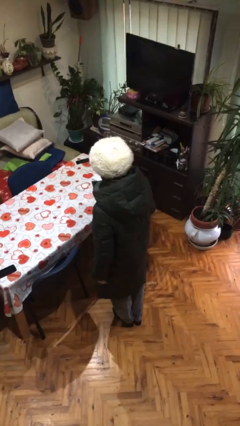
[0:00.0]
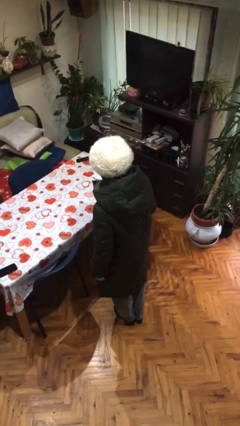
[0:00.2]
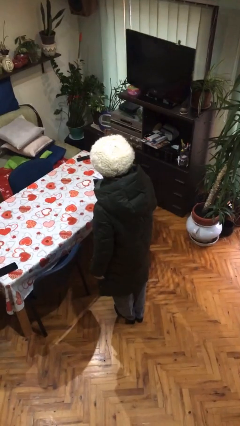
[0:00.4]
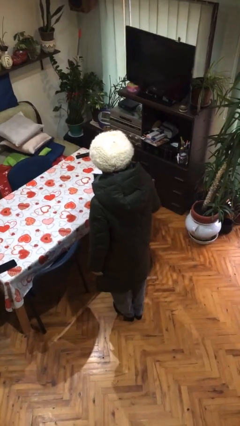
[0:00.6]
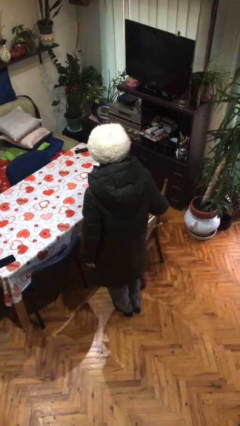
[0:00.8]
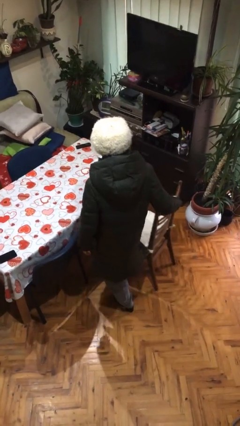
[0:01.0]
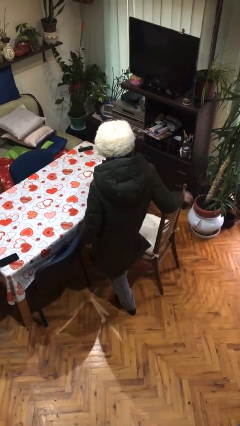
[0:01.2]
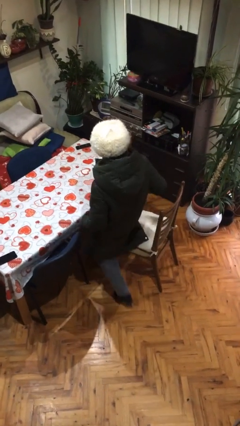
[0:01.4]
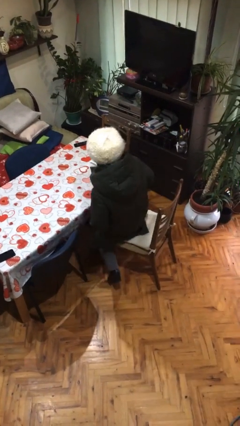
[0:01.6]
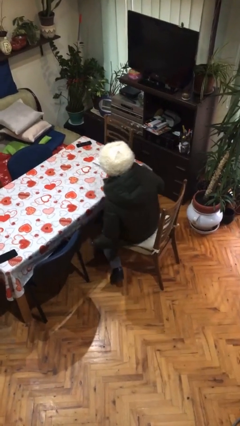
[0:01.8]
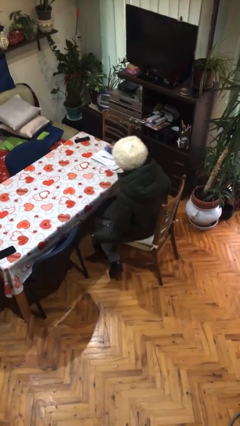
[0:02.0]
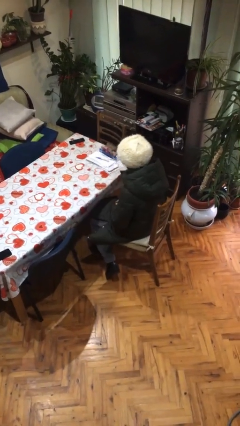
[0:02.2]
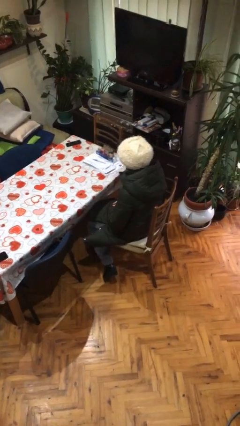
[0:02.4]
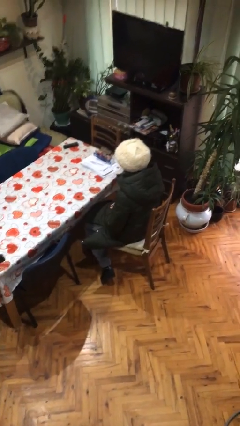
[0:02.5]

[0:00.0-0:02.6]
person sits down

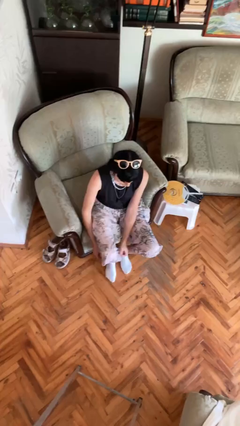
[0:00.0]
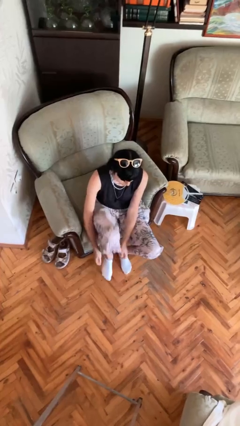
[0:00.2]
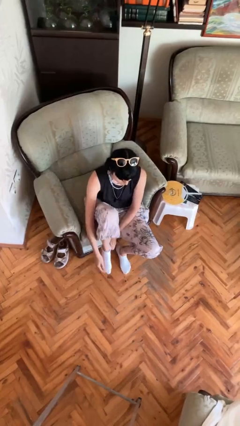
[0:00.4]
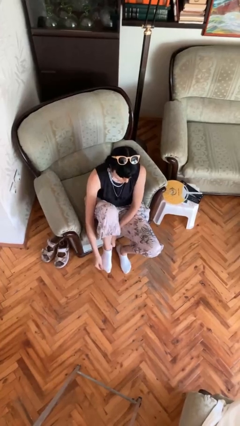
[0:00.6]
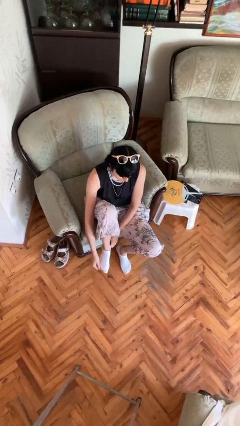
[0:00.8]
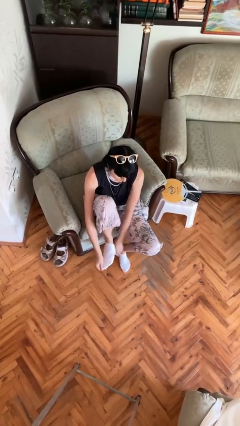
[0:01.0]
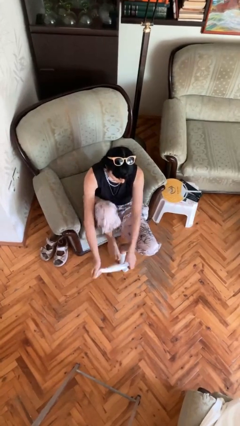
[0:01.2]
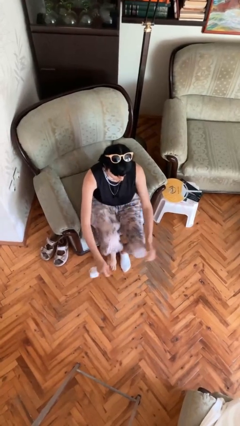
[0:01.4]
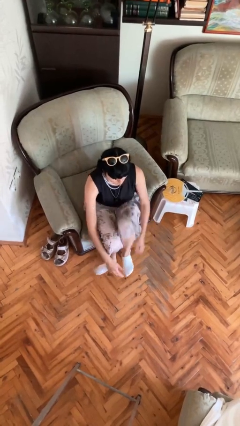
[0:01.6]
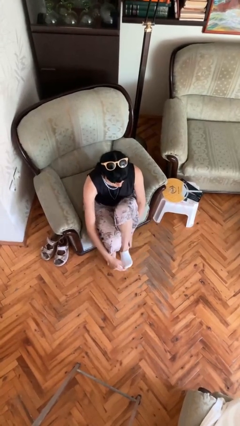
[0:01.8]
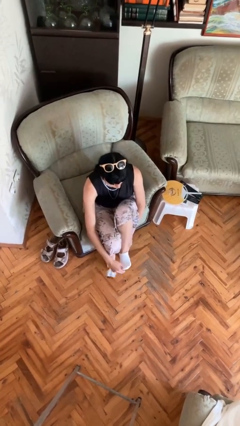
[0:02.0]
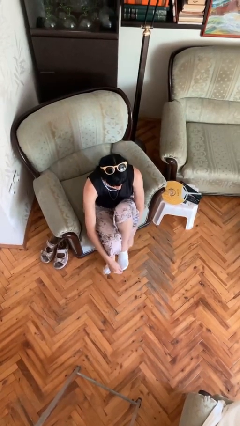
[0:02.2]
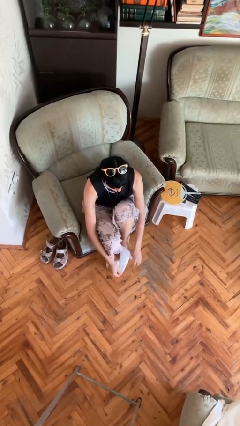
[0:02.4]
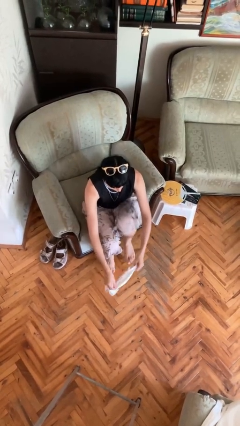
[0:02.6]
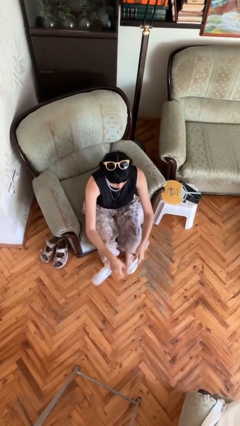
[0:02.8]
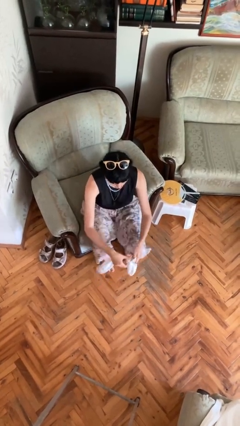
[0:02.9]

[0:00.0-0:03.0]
person takes off socks

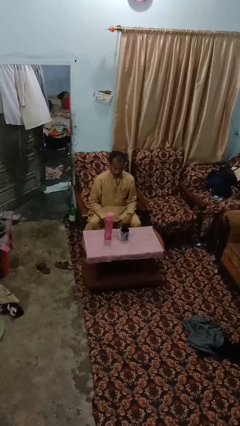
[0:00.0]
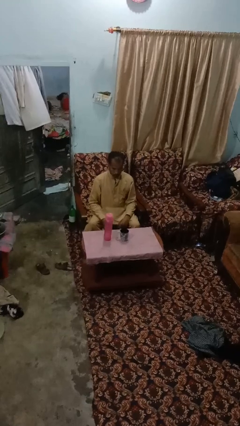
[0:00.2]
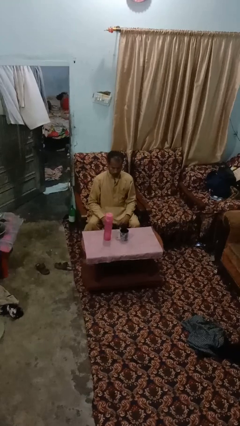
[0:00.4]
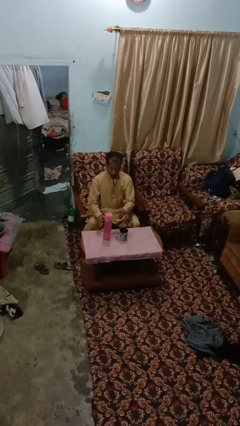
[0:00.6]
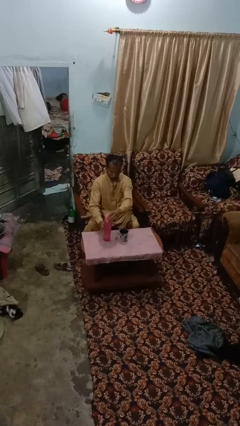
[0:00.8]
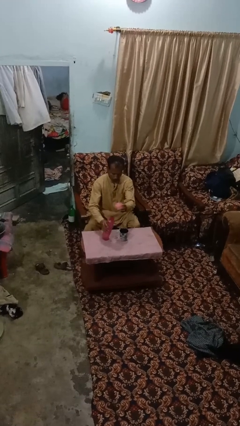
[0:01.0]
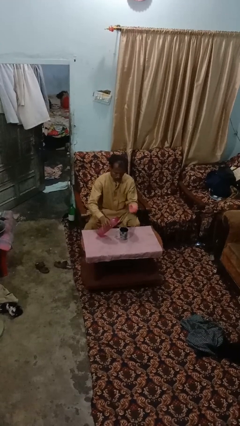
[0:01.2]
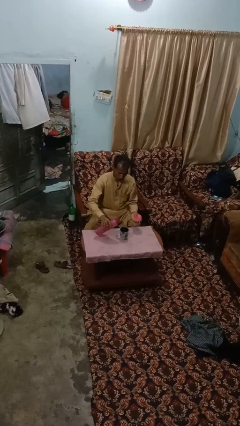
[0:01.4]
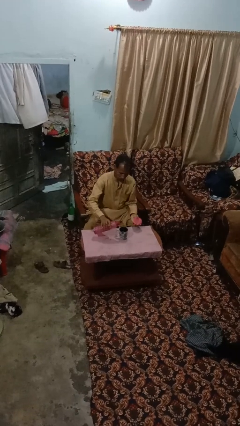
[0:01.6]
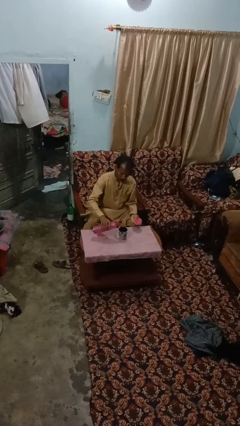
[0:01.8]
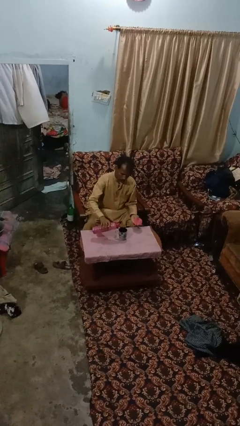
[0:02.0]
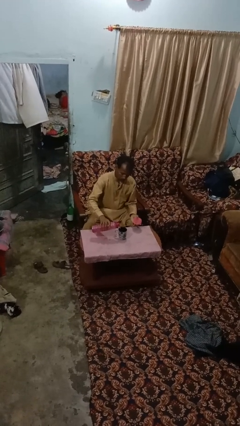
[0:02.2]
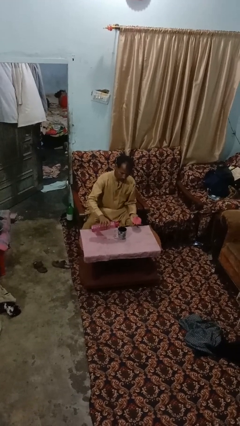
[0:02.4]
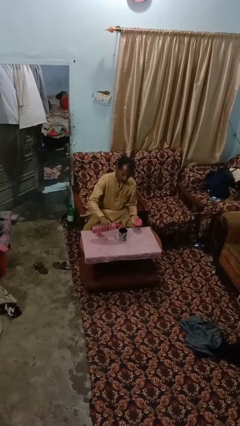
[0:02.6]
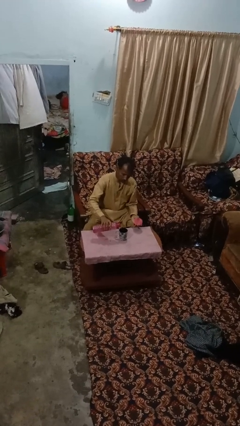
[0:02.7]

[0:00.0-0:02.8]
person pours liquid into cup

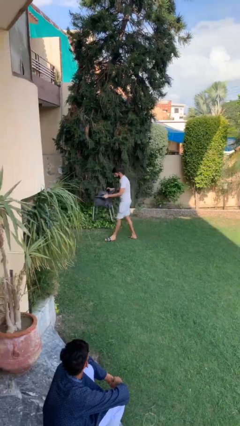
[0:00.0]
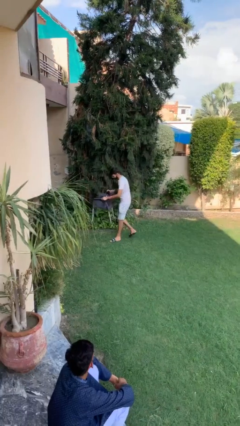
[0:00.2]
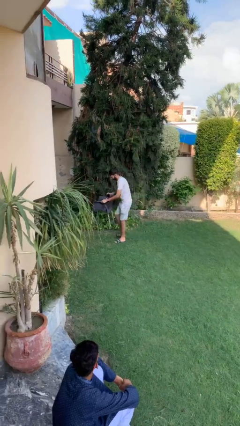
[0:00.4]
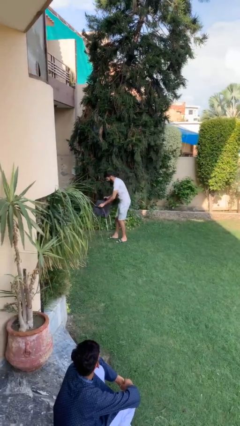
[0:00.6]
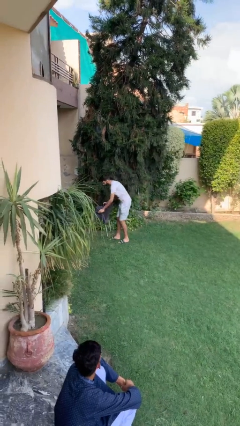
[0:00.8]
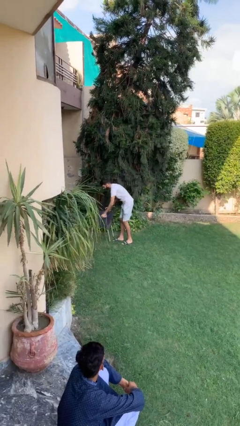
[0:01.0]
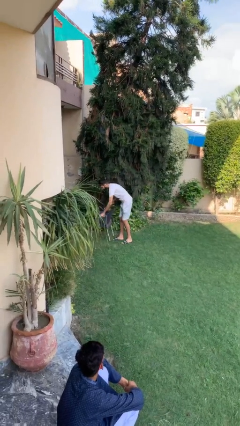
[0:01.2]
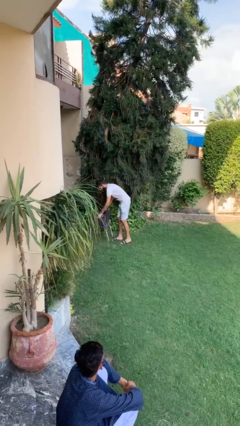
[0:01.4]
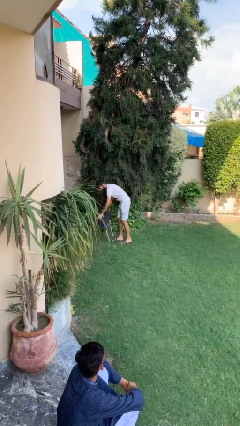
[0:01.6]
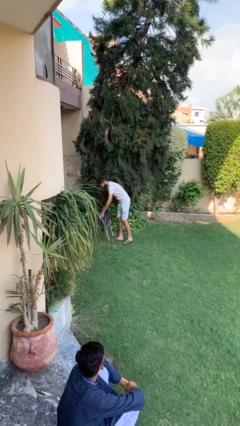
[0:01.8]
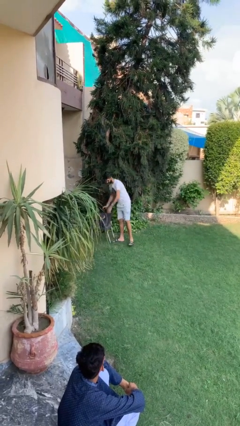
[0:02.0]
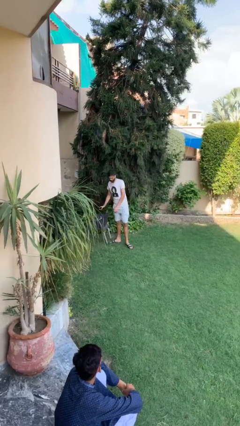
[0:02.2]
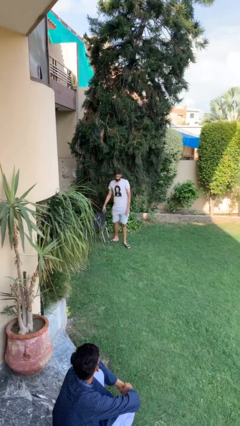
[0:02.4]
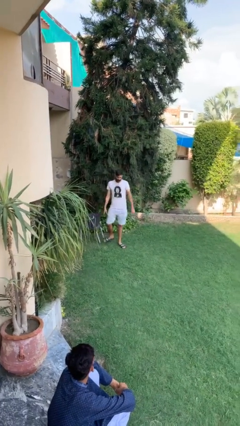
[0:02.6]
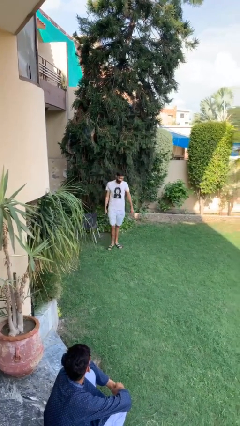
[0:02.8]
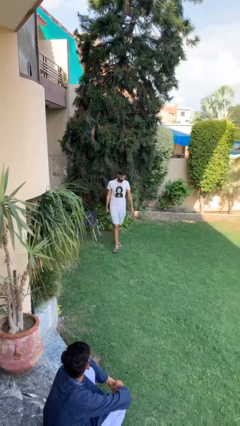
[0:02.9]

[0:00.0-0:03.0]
person puts down object on floor

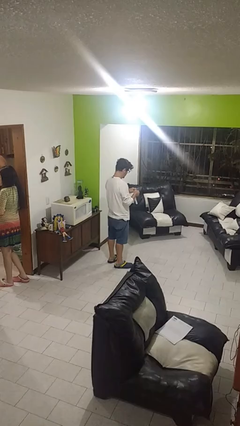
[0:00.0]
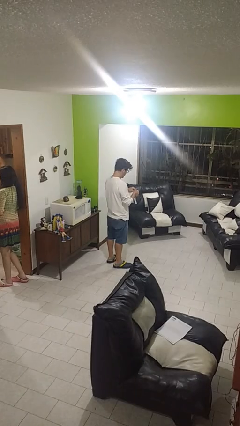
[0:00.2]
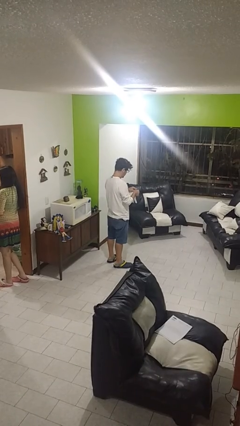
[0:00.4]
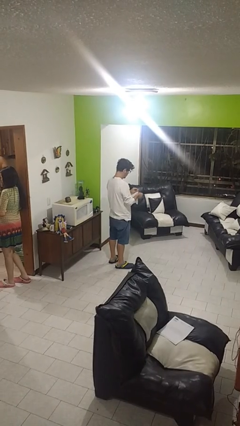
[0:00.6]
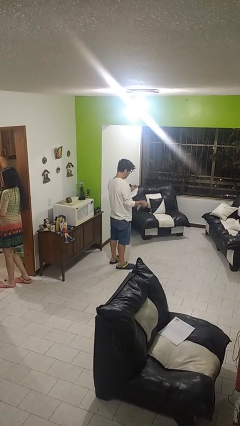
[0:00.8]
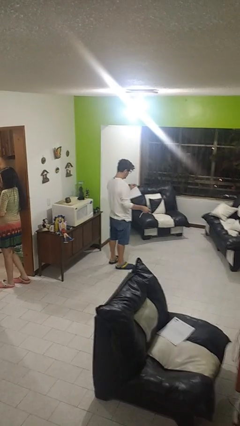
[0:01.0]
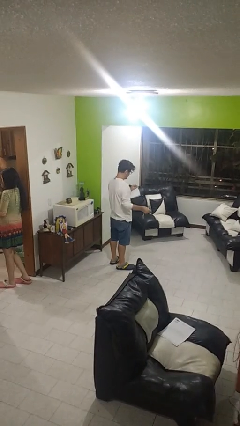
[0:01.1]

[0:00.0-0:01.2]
person tears paper

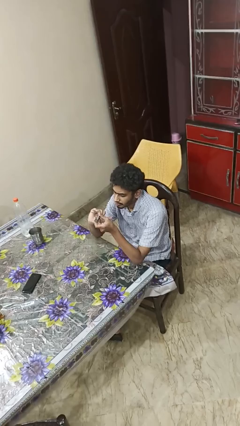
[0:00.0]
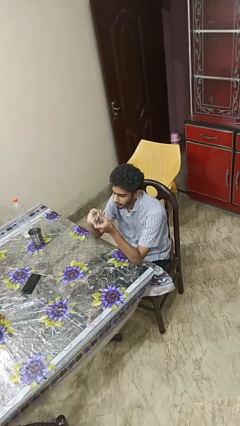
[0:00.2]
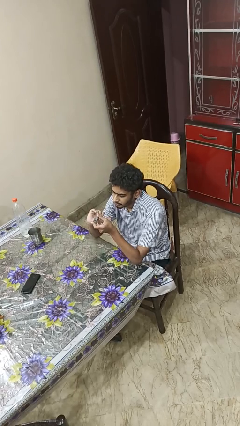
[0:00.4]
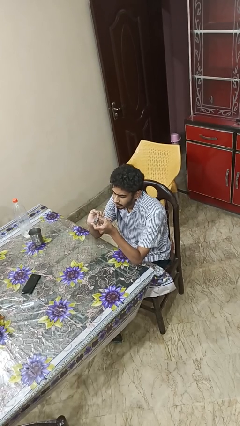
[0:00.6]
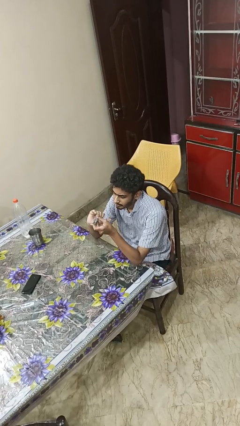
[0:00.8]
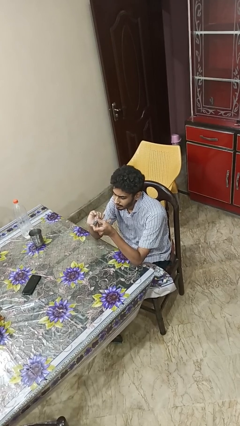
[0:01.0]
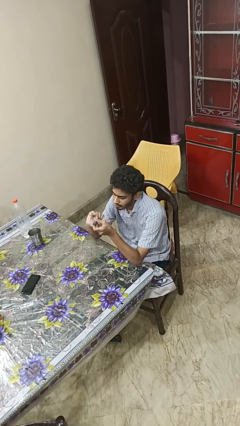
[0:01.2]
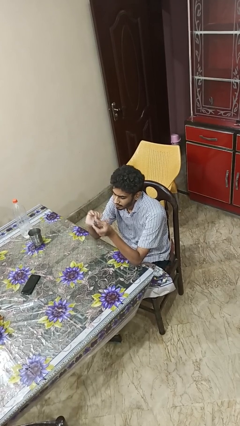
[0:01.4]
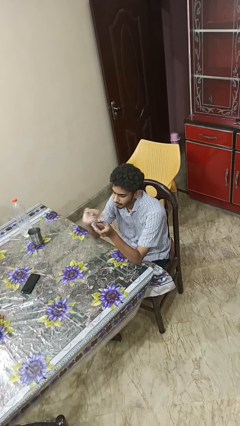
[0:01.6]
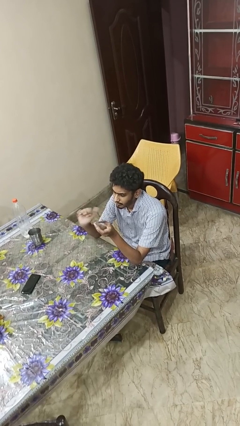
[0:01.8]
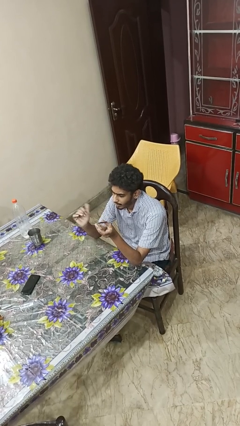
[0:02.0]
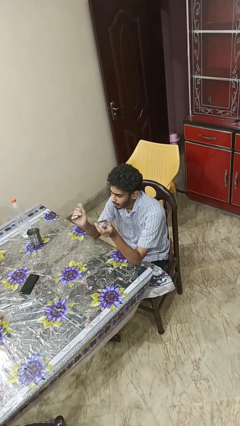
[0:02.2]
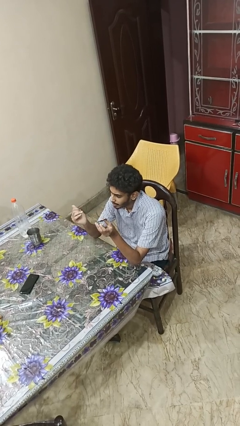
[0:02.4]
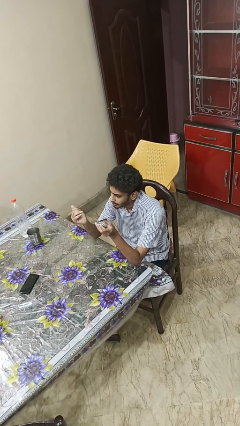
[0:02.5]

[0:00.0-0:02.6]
person clips fingernails

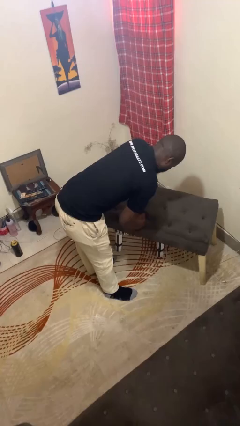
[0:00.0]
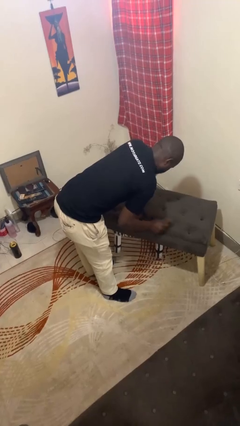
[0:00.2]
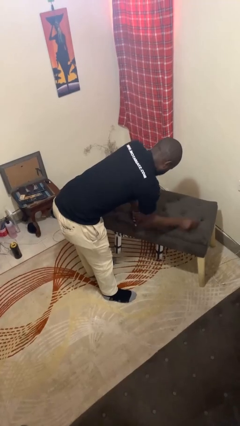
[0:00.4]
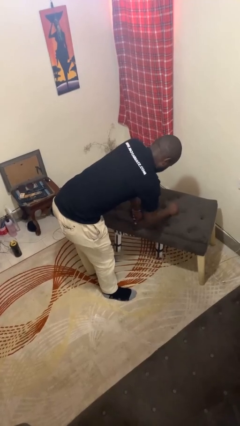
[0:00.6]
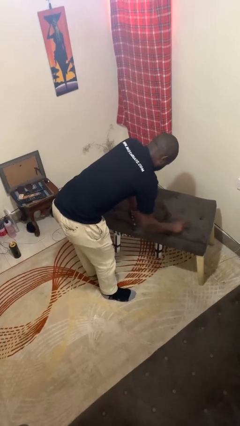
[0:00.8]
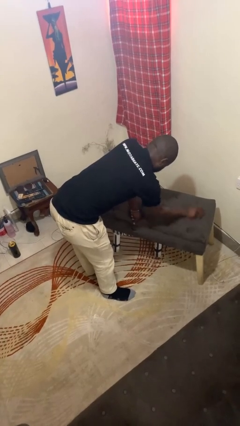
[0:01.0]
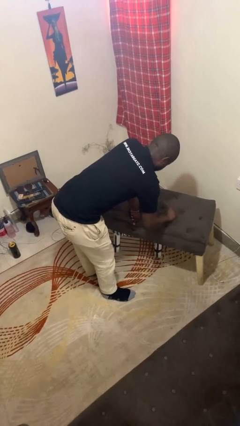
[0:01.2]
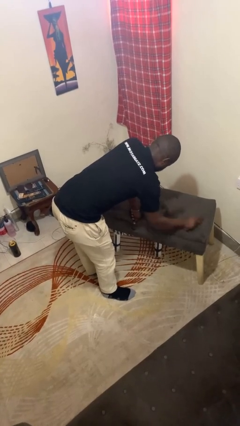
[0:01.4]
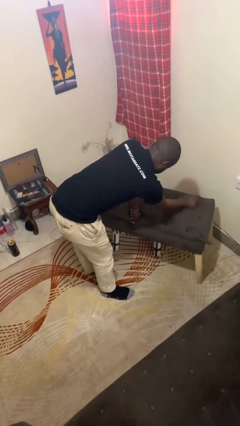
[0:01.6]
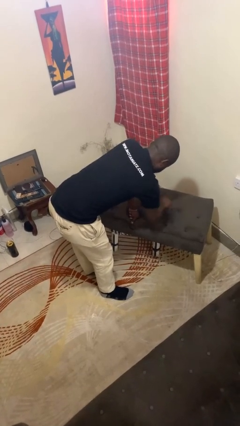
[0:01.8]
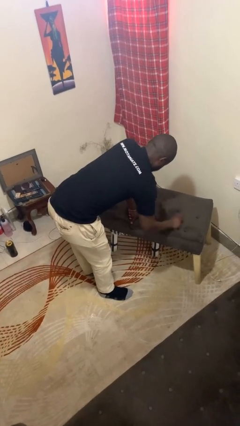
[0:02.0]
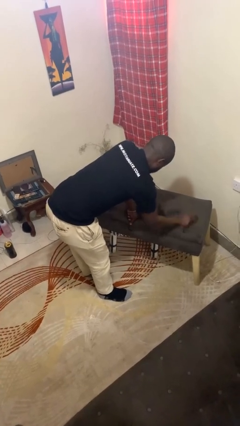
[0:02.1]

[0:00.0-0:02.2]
person cleans table with rag
